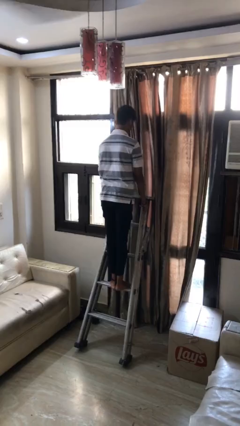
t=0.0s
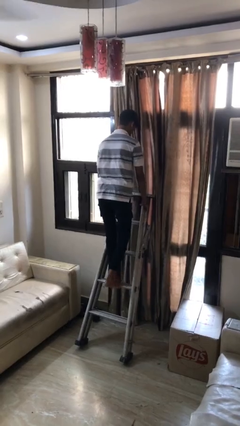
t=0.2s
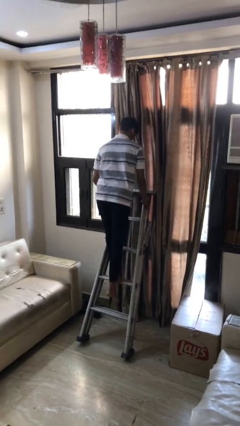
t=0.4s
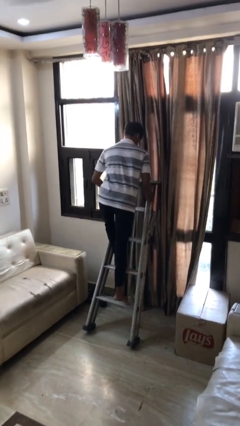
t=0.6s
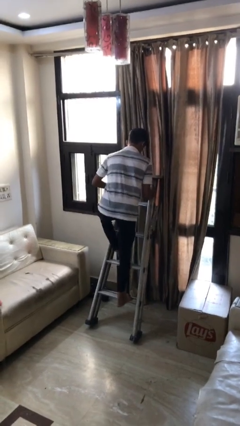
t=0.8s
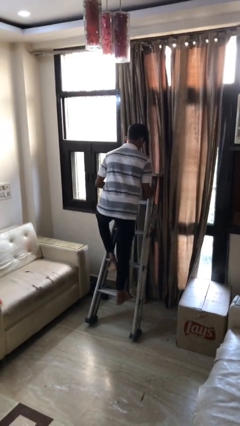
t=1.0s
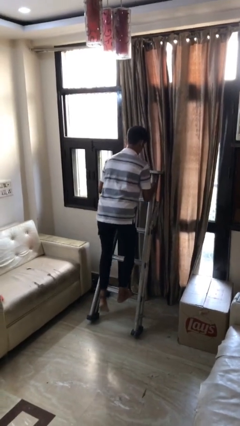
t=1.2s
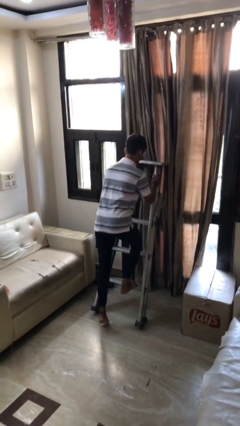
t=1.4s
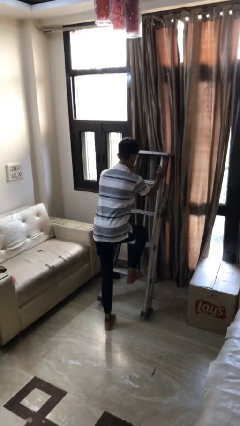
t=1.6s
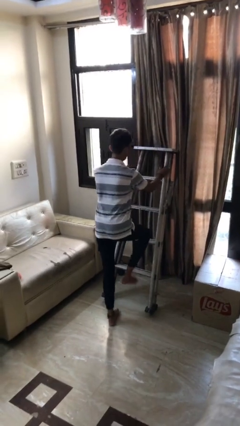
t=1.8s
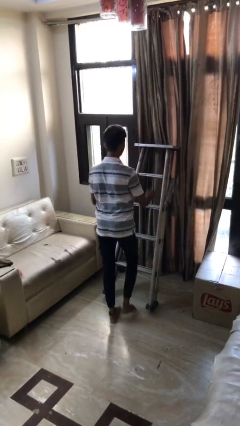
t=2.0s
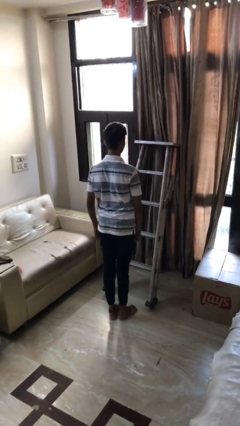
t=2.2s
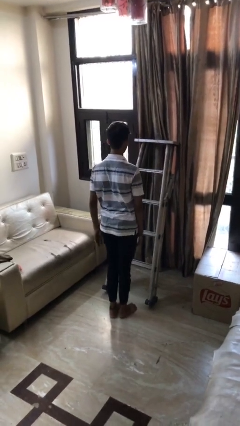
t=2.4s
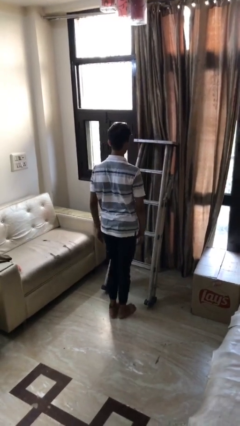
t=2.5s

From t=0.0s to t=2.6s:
person climbs down ladder

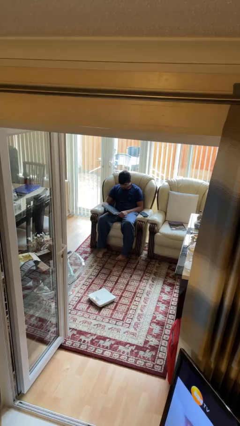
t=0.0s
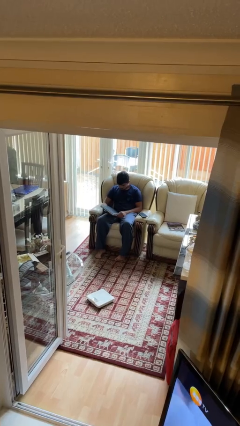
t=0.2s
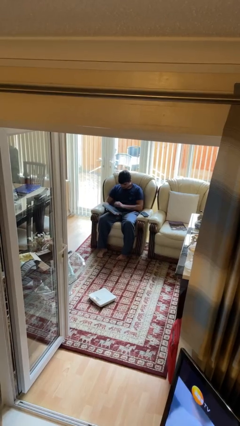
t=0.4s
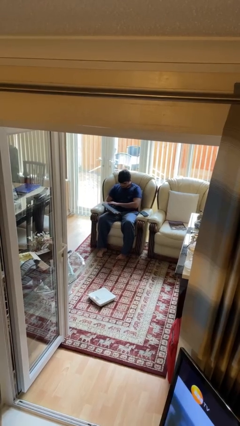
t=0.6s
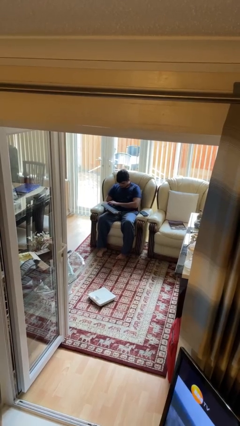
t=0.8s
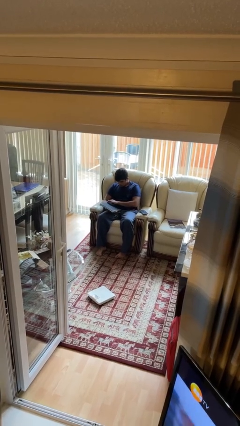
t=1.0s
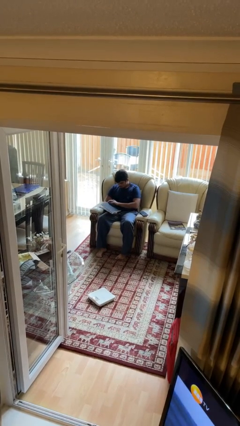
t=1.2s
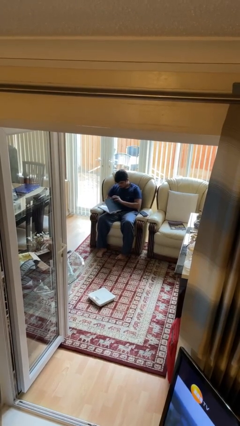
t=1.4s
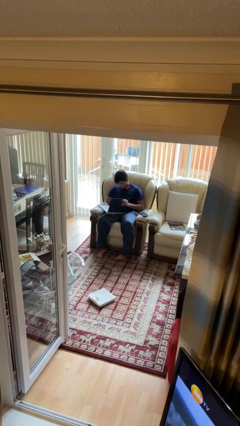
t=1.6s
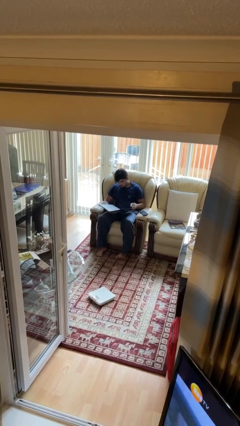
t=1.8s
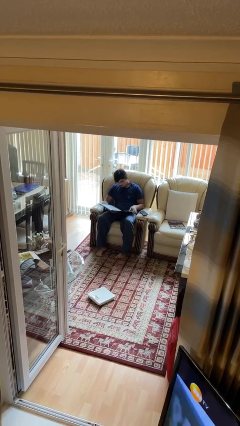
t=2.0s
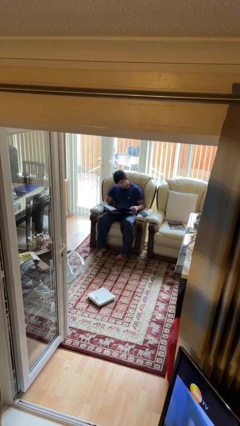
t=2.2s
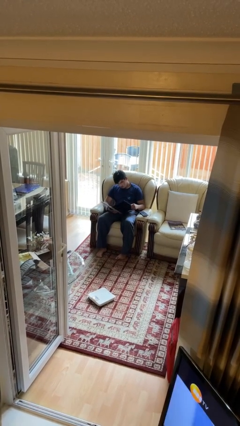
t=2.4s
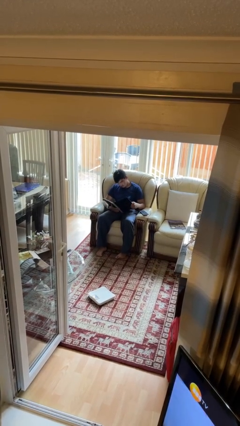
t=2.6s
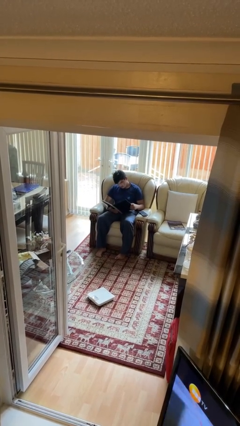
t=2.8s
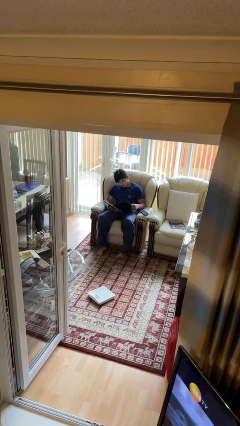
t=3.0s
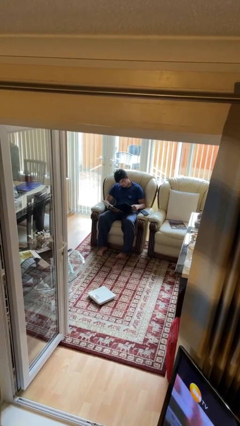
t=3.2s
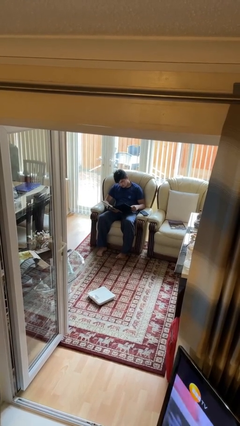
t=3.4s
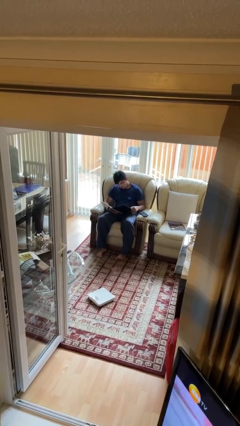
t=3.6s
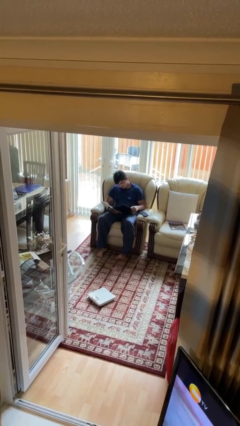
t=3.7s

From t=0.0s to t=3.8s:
person reads book

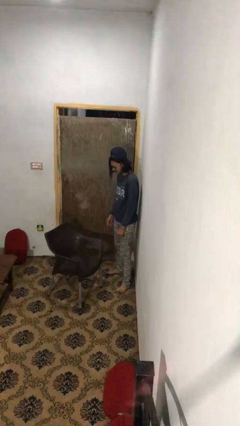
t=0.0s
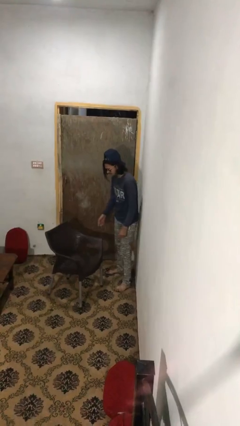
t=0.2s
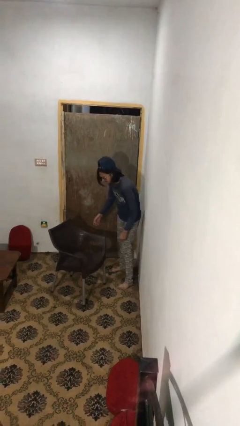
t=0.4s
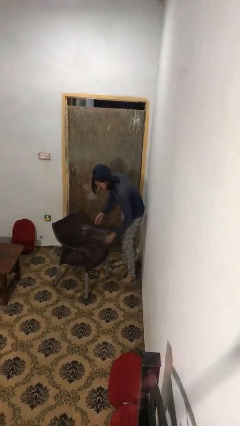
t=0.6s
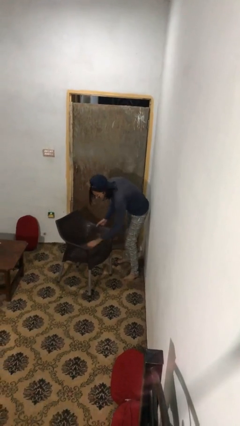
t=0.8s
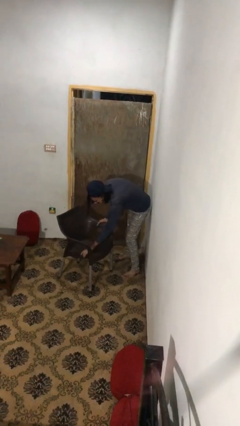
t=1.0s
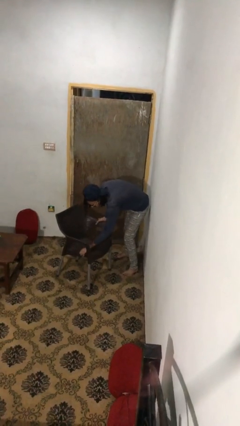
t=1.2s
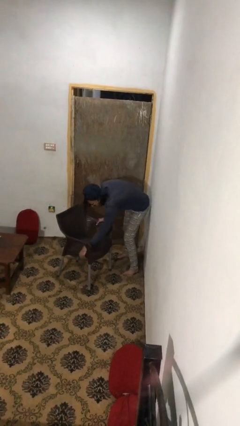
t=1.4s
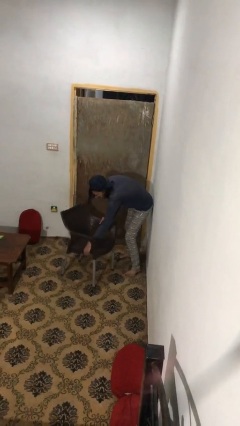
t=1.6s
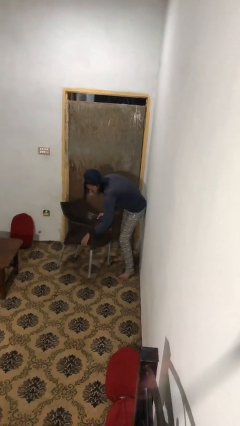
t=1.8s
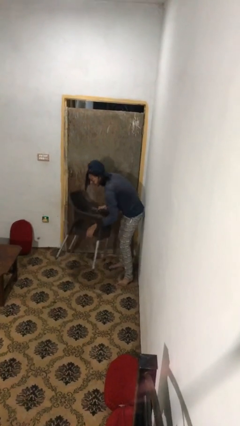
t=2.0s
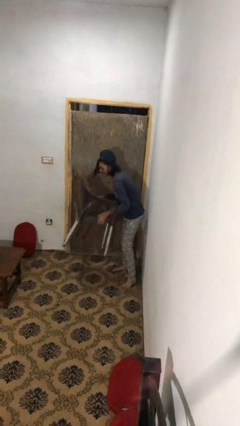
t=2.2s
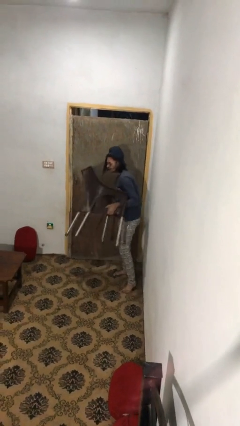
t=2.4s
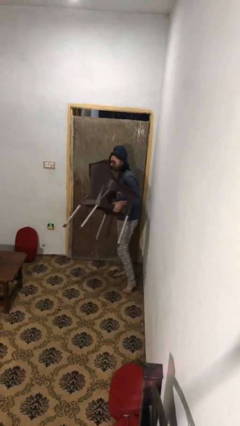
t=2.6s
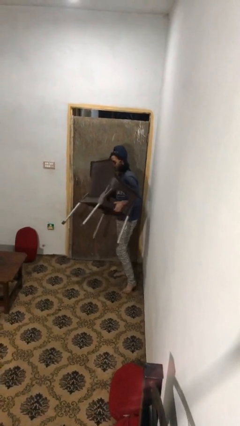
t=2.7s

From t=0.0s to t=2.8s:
person picks up object from floor

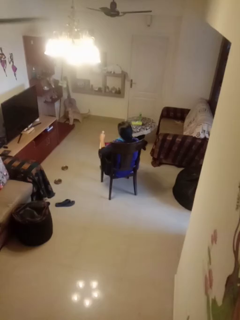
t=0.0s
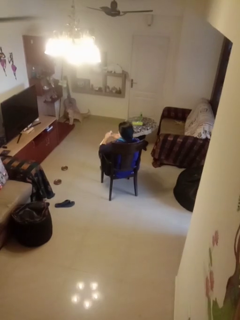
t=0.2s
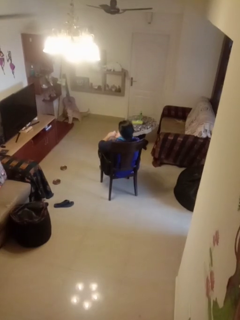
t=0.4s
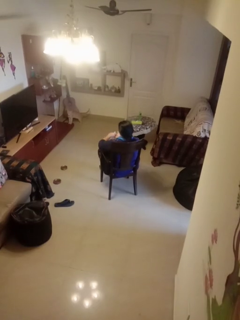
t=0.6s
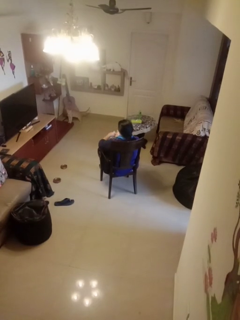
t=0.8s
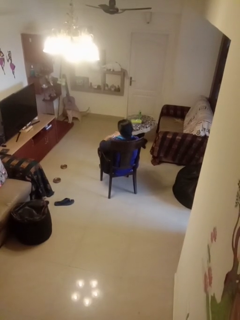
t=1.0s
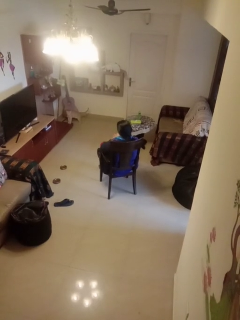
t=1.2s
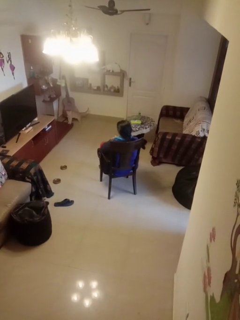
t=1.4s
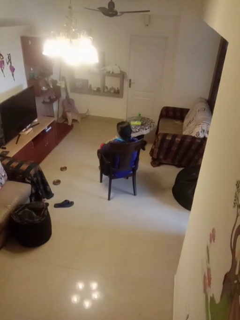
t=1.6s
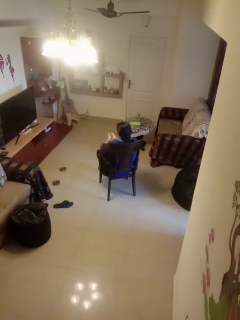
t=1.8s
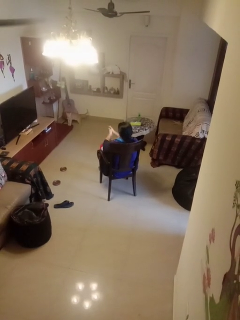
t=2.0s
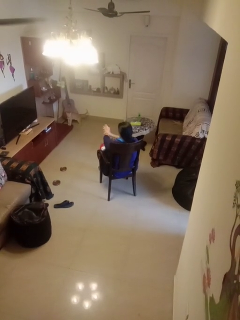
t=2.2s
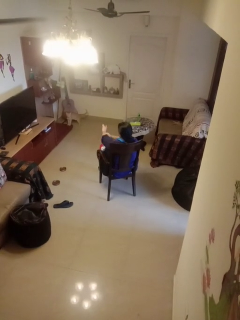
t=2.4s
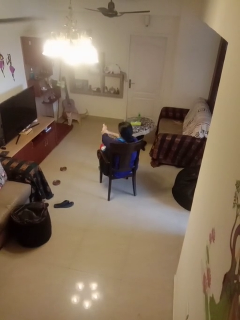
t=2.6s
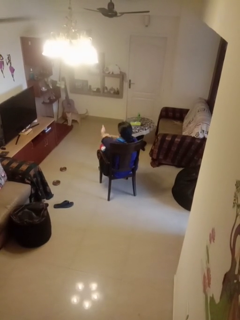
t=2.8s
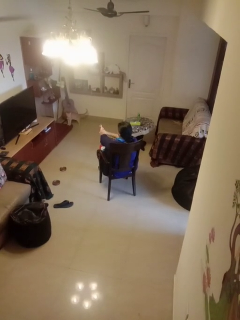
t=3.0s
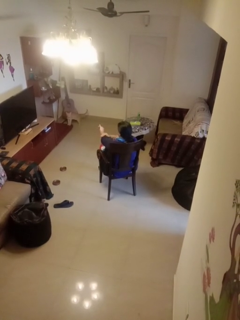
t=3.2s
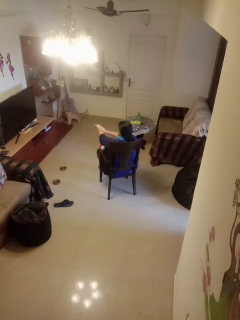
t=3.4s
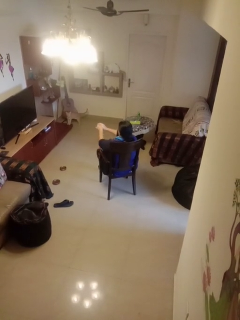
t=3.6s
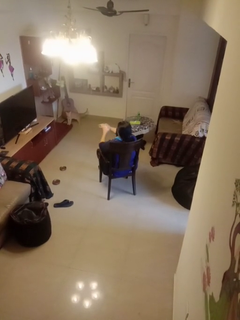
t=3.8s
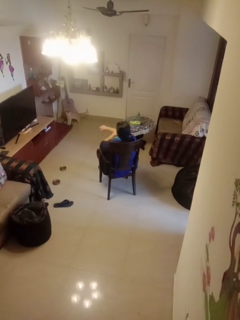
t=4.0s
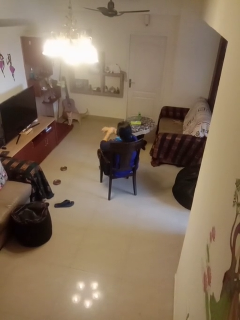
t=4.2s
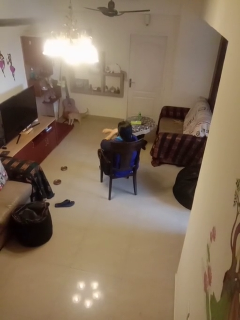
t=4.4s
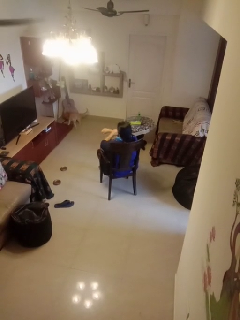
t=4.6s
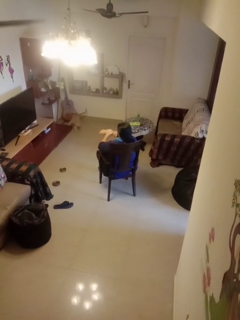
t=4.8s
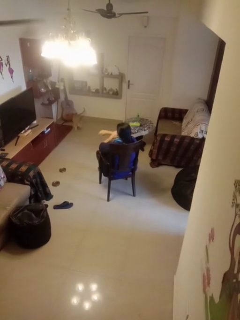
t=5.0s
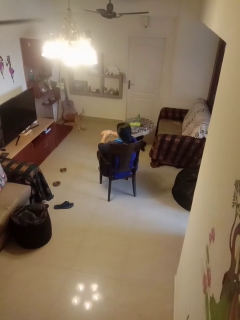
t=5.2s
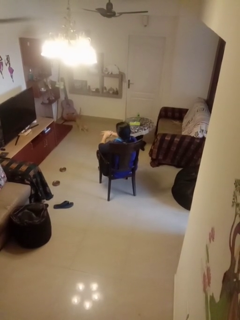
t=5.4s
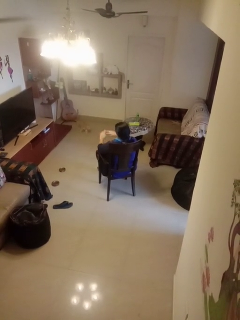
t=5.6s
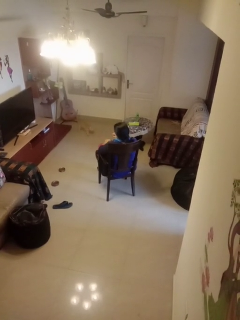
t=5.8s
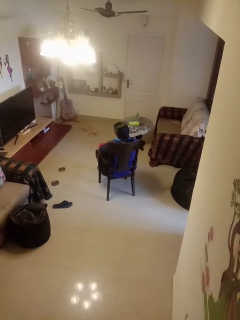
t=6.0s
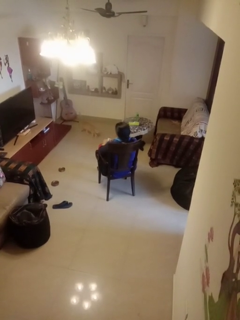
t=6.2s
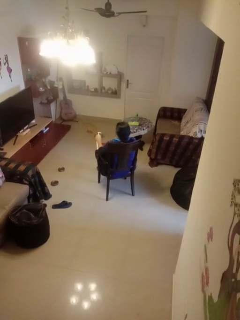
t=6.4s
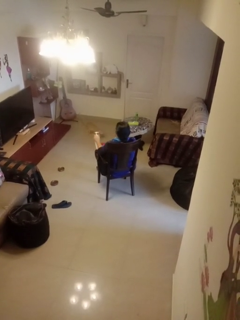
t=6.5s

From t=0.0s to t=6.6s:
person applies sunscreen

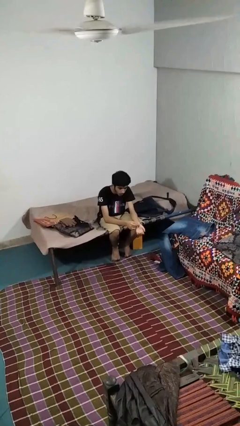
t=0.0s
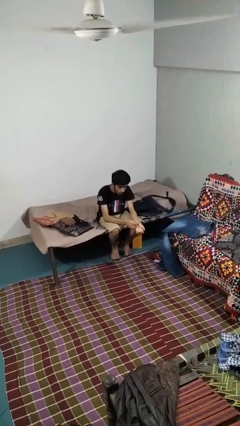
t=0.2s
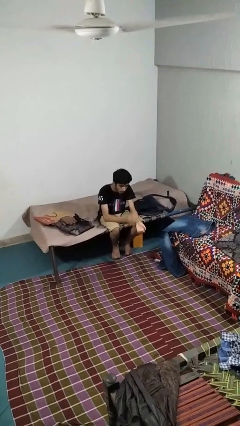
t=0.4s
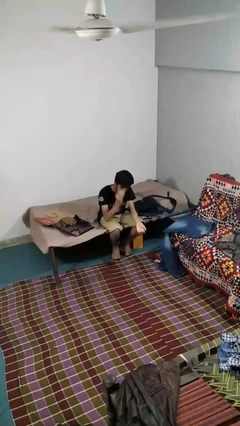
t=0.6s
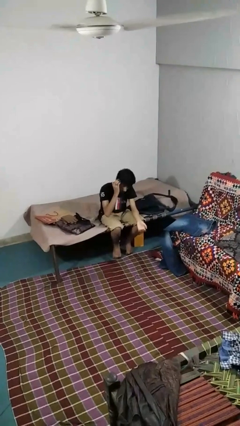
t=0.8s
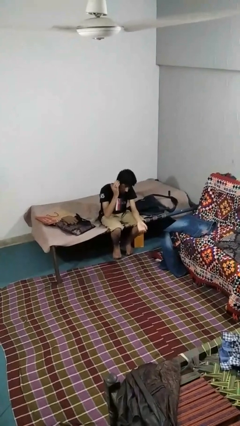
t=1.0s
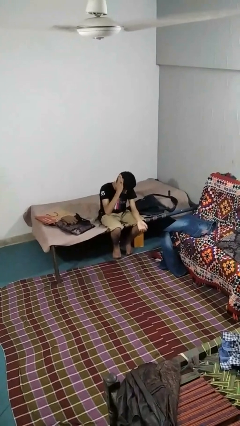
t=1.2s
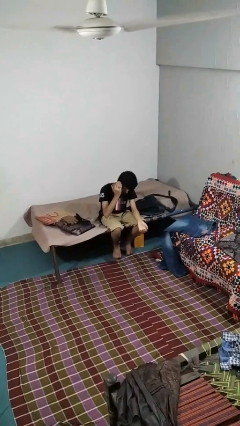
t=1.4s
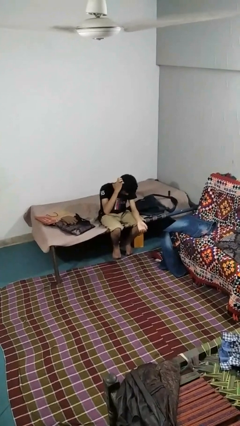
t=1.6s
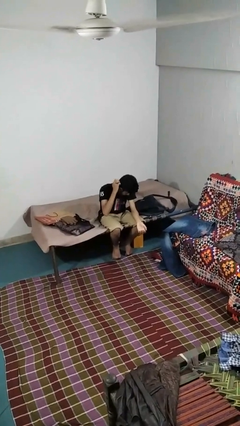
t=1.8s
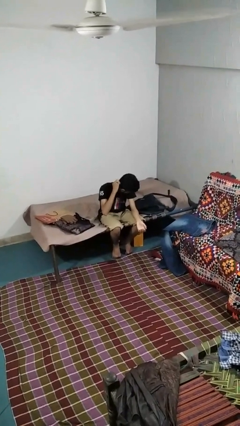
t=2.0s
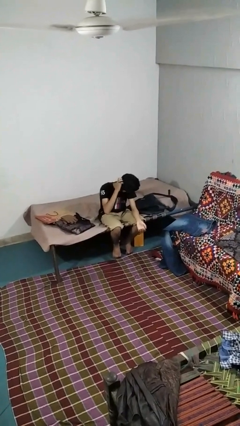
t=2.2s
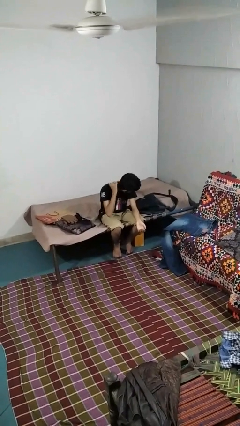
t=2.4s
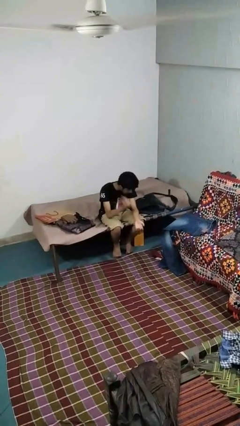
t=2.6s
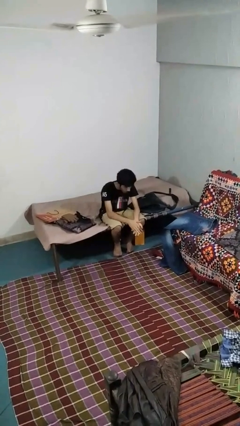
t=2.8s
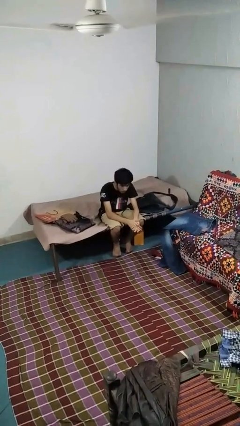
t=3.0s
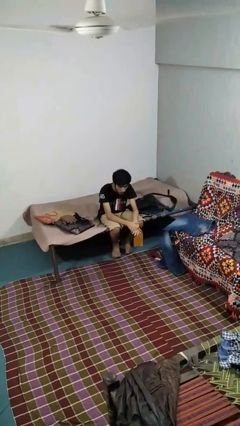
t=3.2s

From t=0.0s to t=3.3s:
person strokes hair

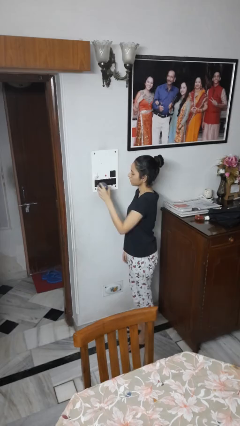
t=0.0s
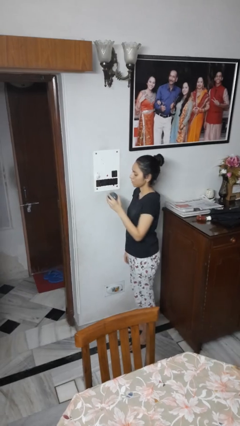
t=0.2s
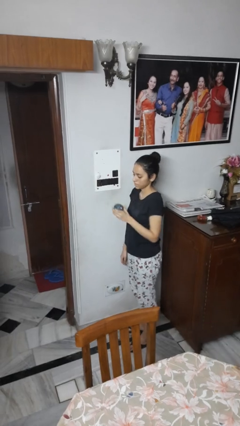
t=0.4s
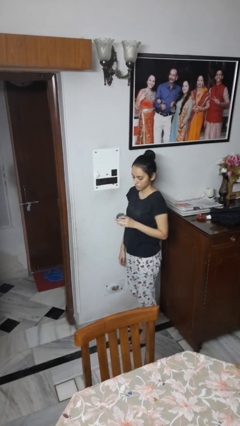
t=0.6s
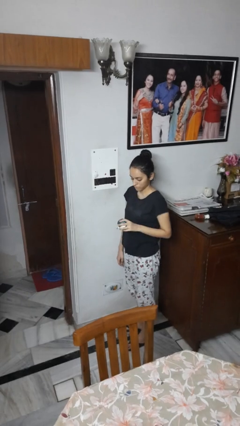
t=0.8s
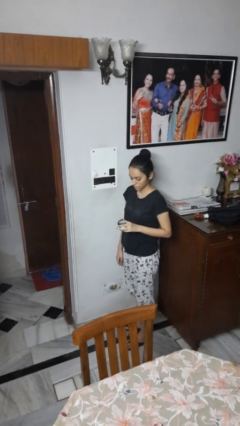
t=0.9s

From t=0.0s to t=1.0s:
person unplugs from electrical socket
